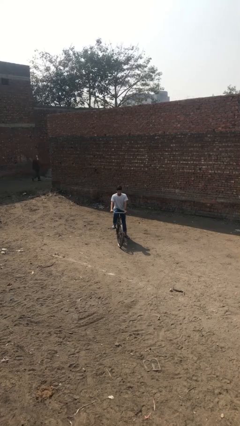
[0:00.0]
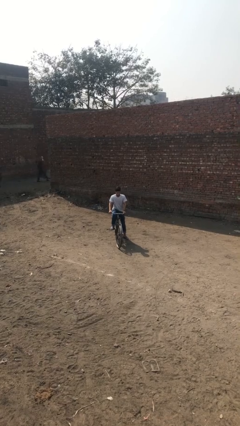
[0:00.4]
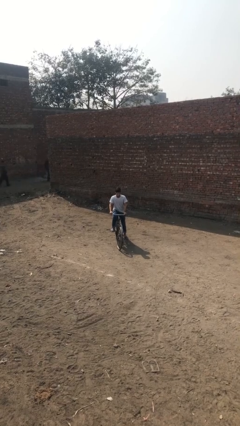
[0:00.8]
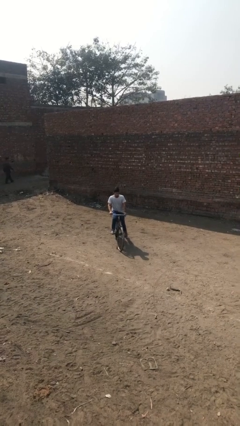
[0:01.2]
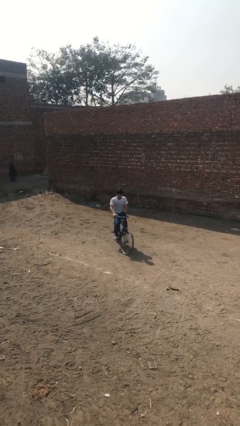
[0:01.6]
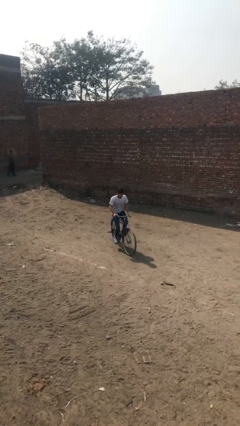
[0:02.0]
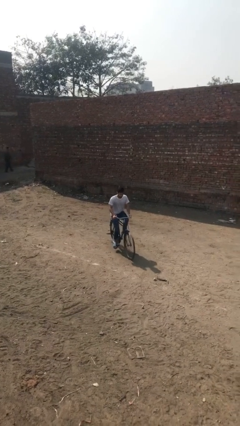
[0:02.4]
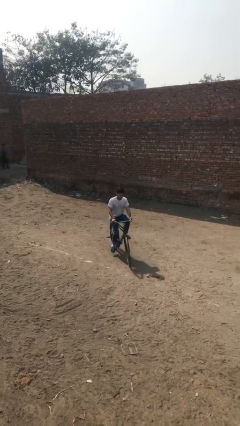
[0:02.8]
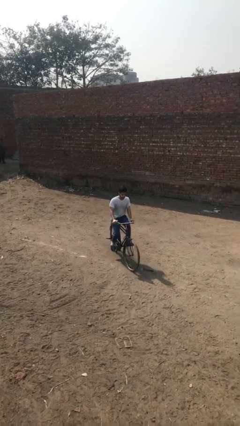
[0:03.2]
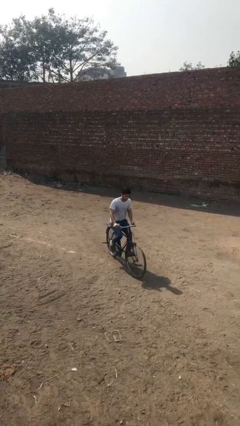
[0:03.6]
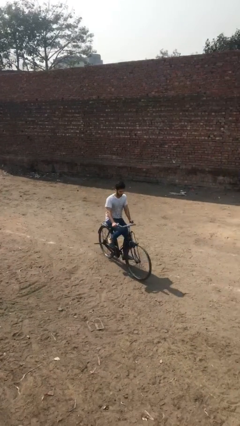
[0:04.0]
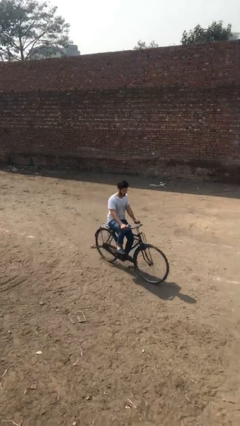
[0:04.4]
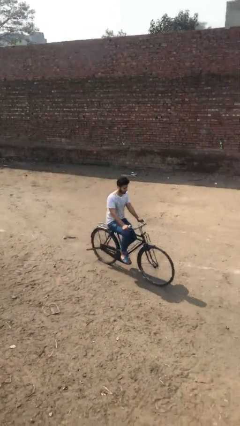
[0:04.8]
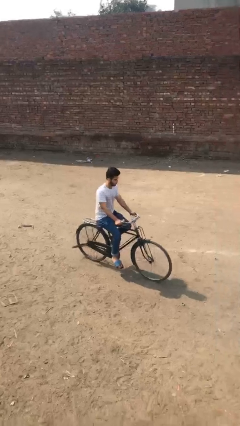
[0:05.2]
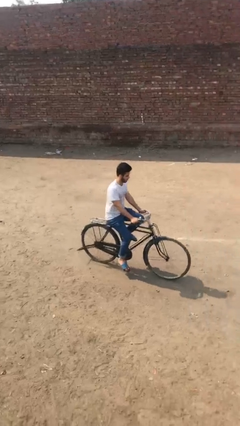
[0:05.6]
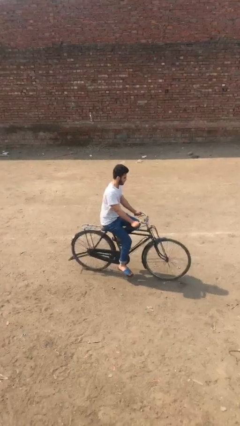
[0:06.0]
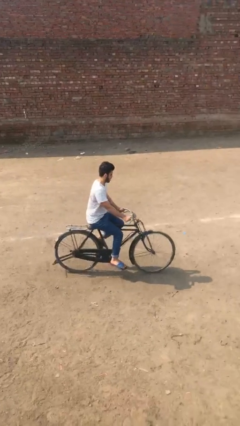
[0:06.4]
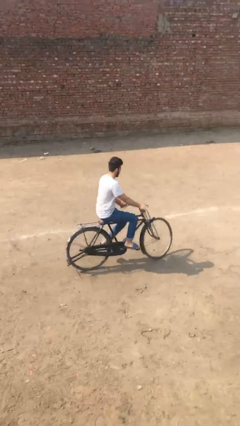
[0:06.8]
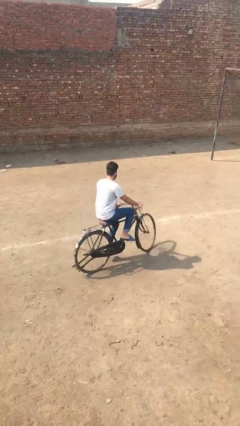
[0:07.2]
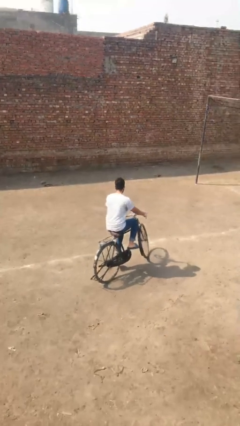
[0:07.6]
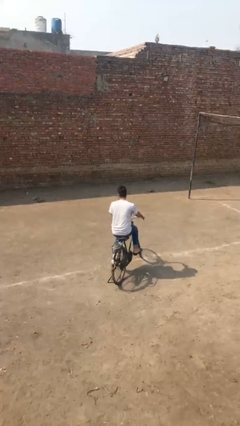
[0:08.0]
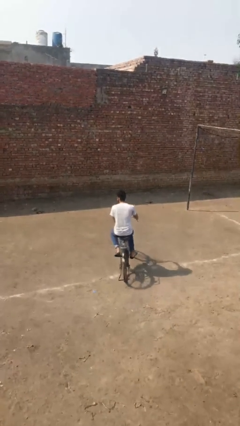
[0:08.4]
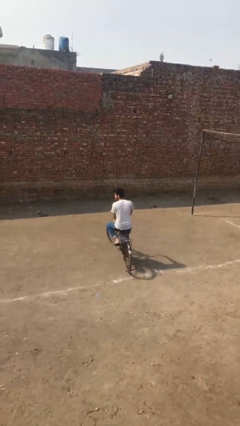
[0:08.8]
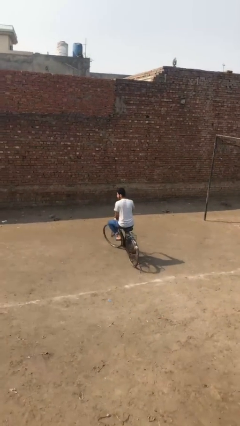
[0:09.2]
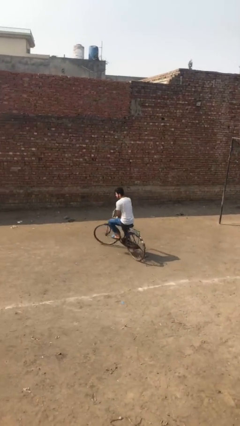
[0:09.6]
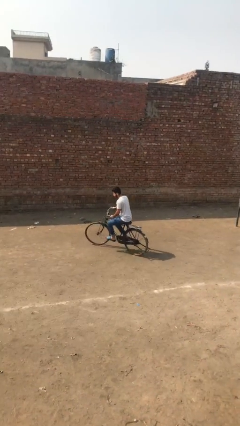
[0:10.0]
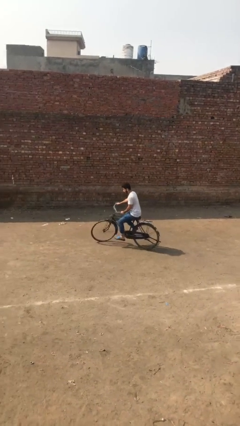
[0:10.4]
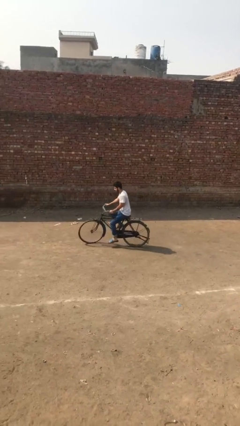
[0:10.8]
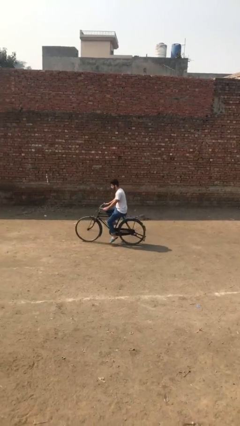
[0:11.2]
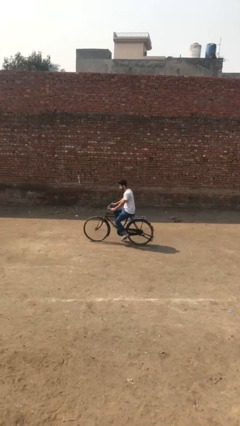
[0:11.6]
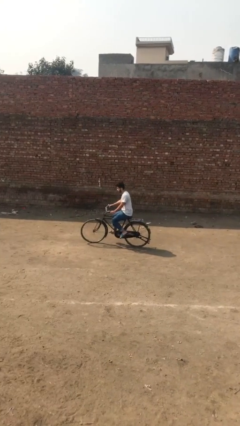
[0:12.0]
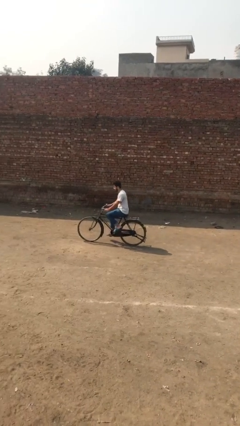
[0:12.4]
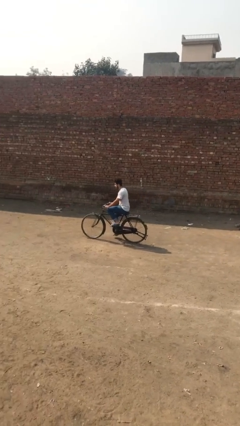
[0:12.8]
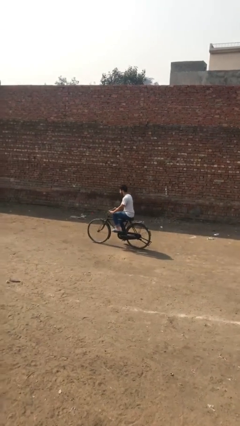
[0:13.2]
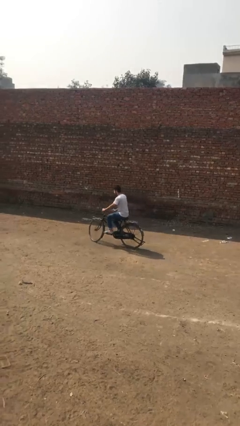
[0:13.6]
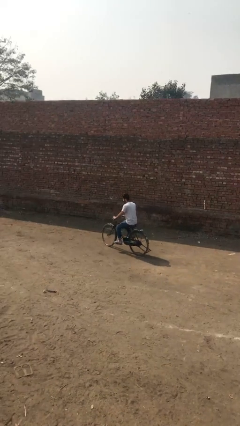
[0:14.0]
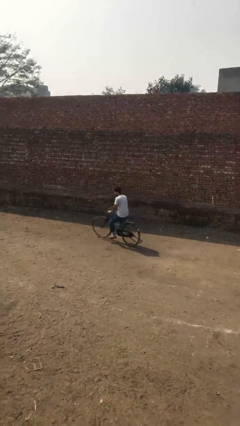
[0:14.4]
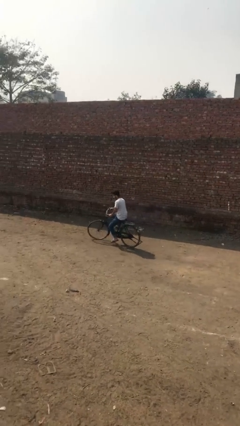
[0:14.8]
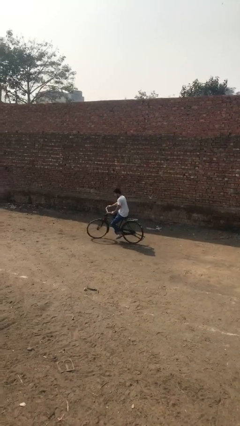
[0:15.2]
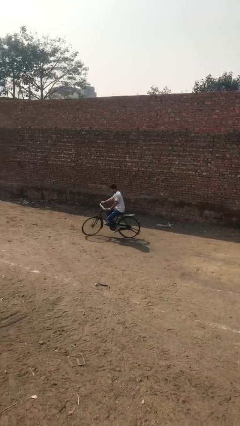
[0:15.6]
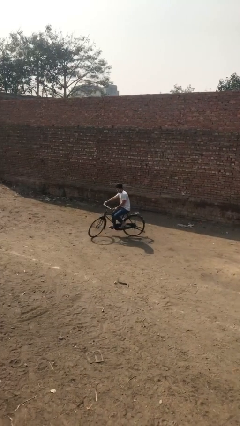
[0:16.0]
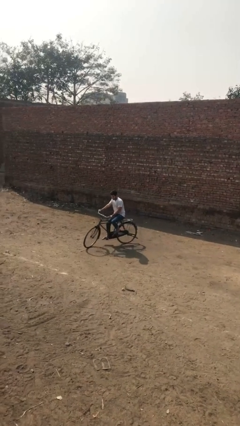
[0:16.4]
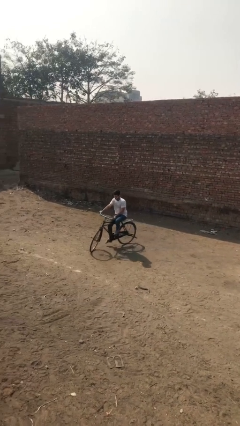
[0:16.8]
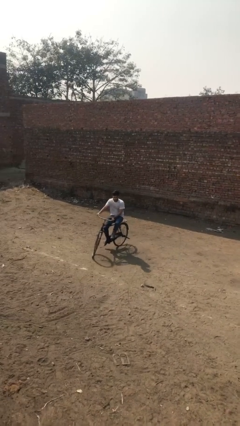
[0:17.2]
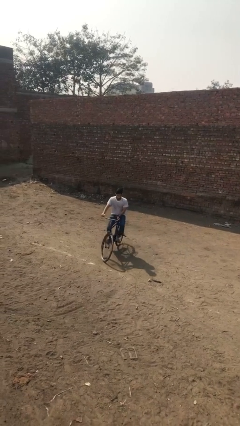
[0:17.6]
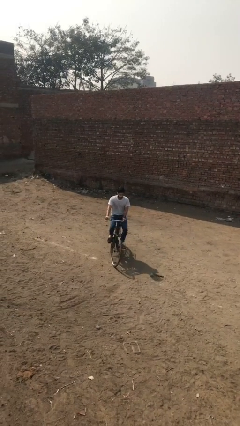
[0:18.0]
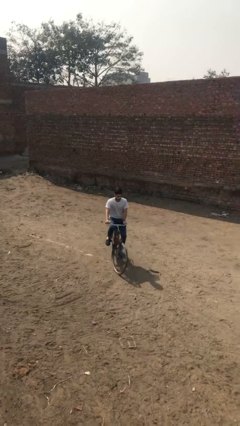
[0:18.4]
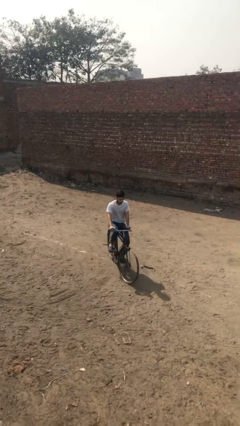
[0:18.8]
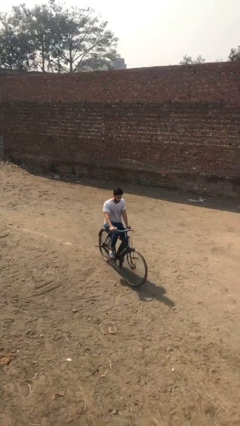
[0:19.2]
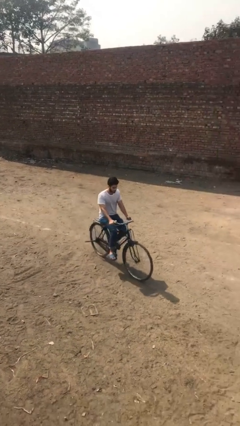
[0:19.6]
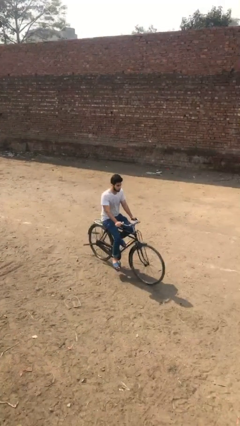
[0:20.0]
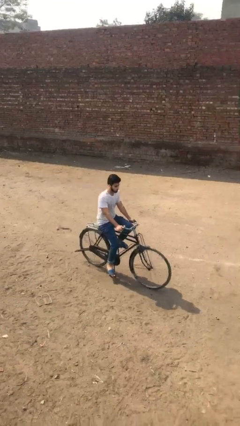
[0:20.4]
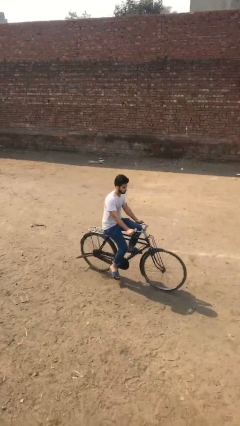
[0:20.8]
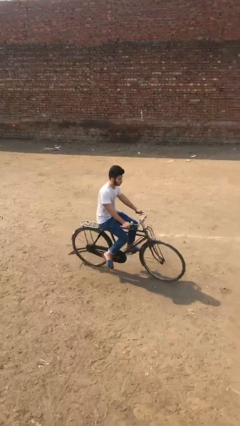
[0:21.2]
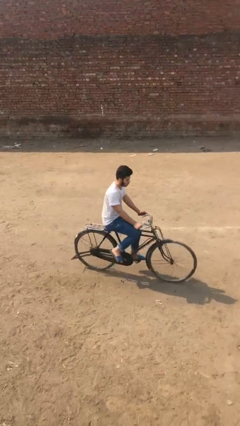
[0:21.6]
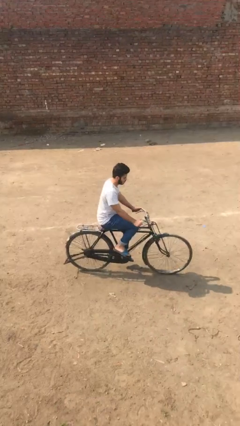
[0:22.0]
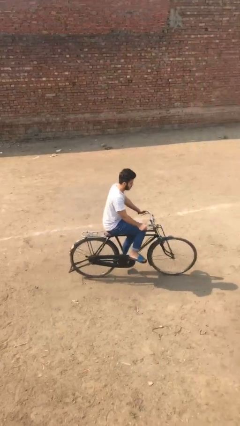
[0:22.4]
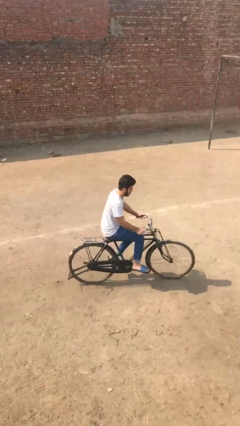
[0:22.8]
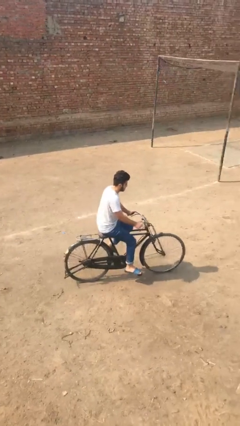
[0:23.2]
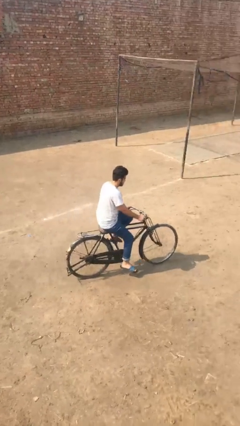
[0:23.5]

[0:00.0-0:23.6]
person rides bicycle

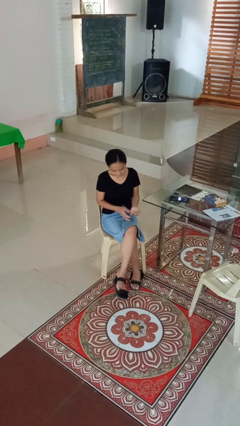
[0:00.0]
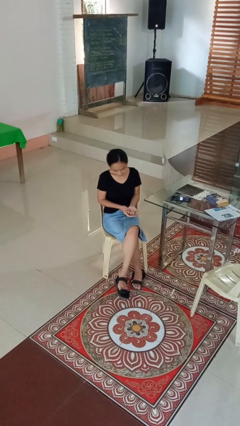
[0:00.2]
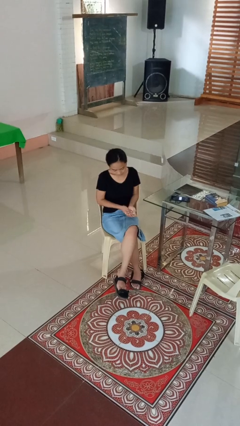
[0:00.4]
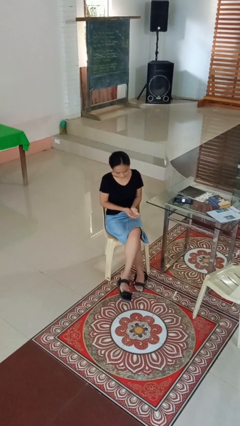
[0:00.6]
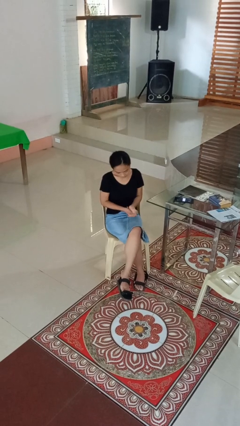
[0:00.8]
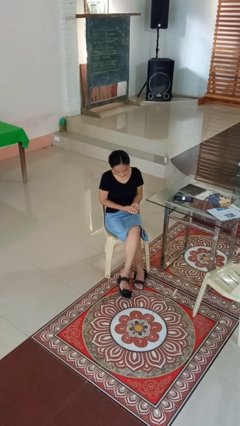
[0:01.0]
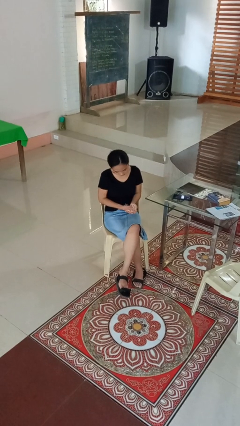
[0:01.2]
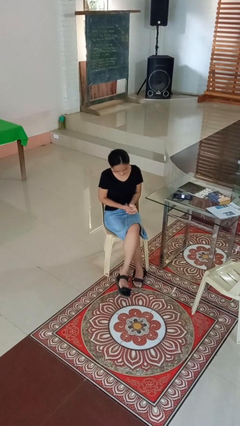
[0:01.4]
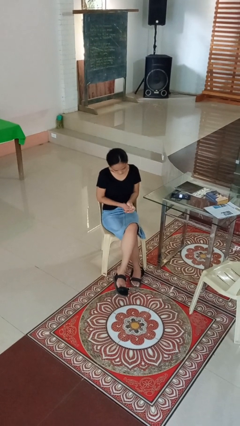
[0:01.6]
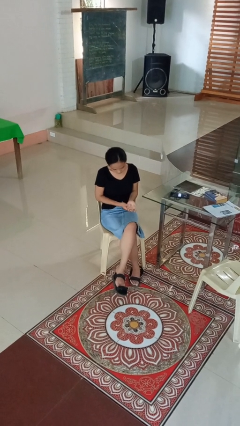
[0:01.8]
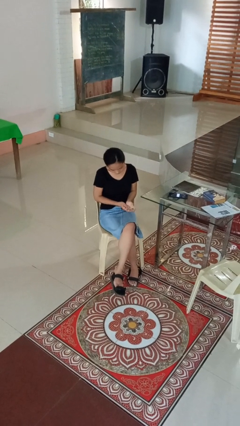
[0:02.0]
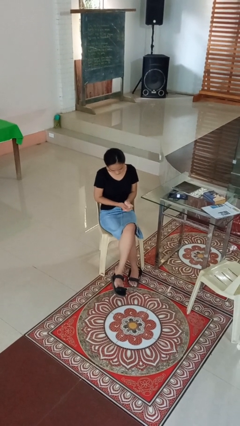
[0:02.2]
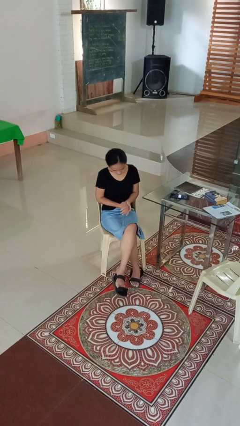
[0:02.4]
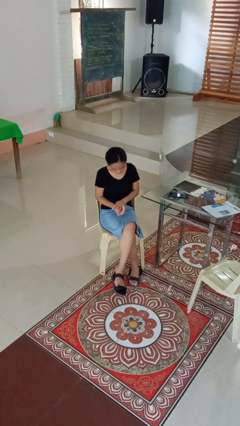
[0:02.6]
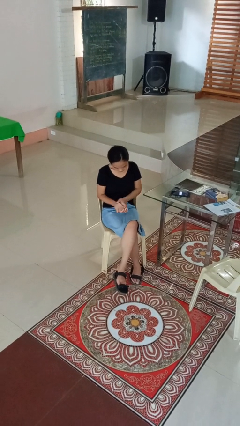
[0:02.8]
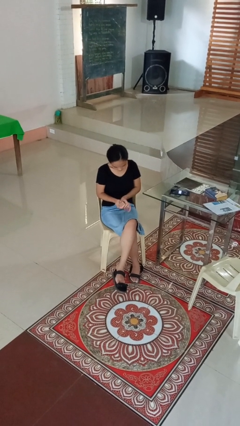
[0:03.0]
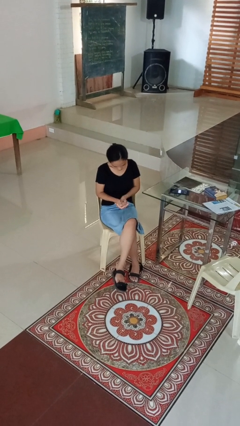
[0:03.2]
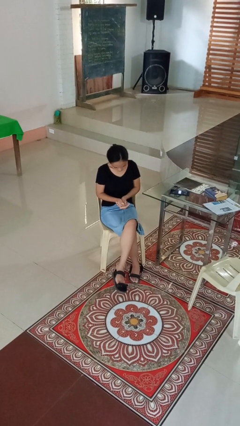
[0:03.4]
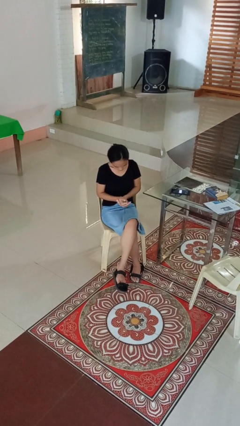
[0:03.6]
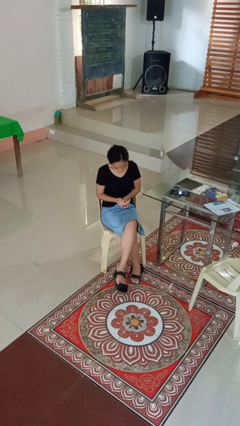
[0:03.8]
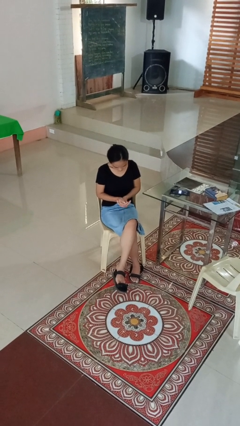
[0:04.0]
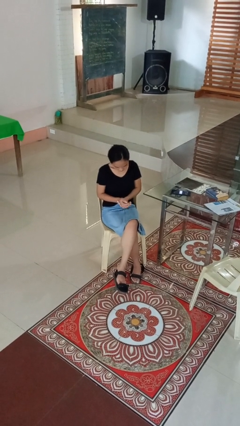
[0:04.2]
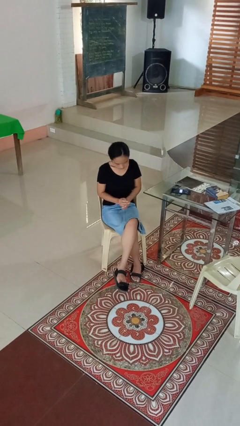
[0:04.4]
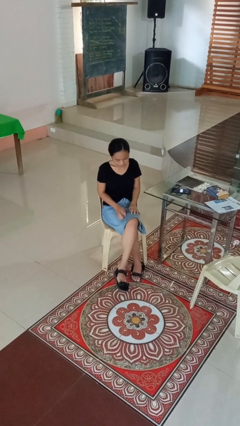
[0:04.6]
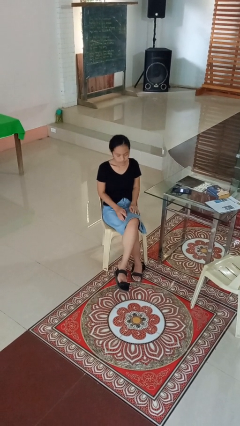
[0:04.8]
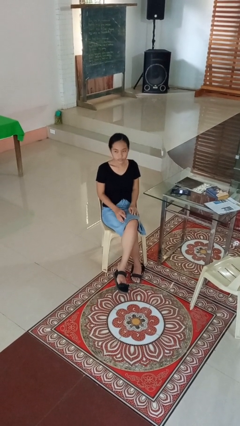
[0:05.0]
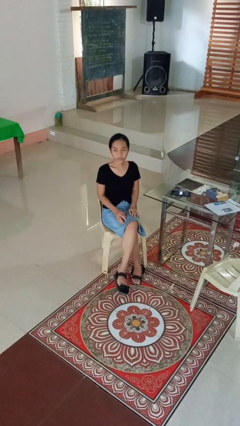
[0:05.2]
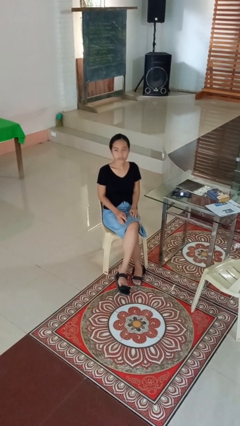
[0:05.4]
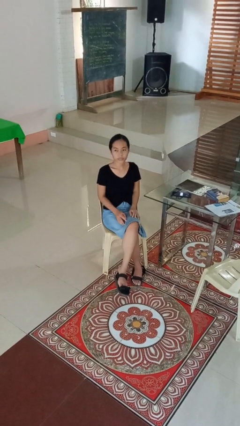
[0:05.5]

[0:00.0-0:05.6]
person looks at hands in lap

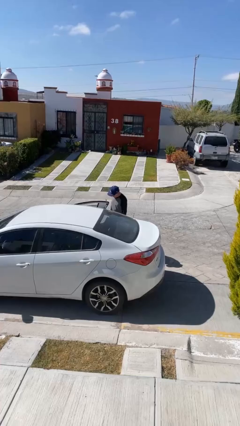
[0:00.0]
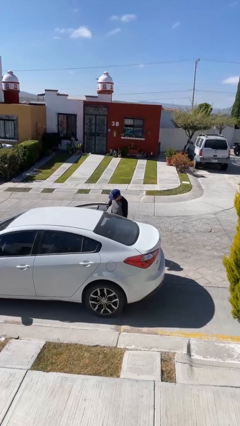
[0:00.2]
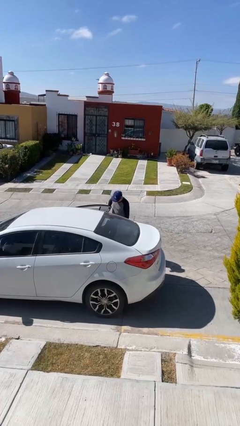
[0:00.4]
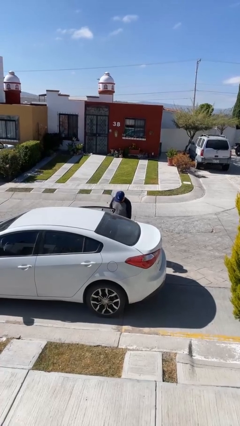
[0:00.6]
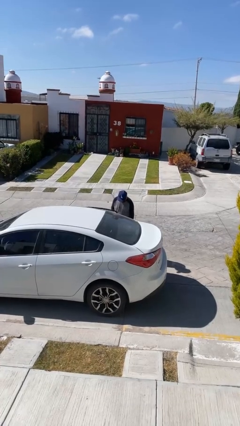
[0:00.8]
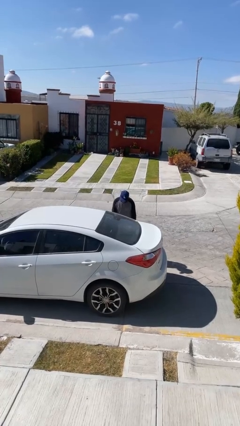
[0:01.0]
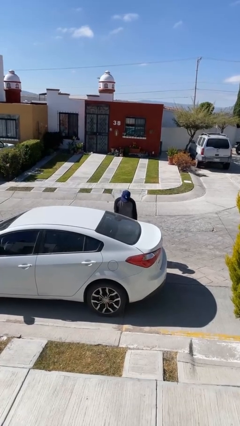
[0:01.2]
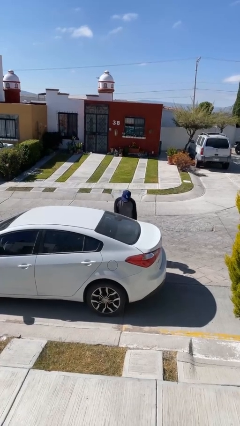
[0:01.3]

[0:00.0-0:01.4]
person closes car door
